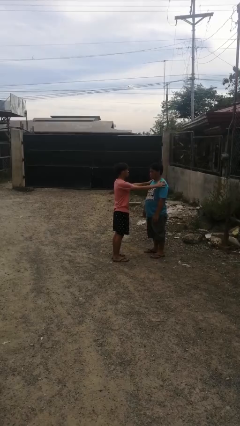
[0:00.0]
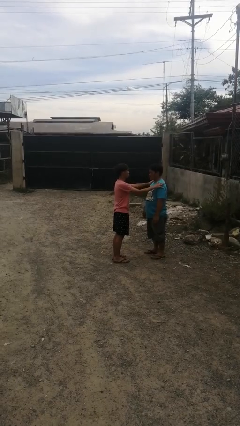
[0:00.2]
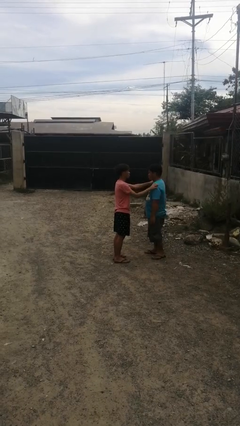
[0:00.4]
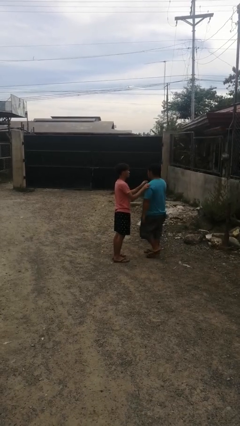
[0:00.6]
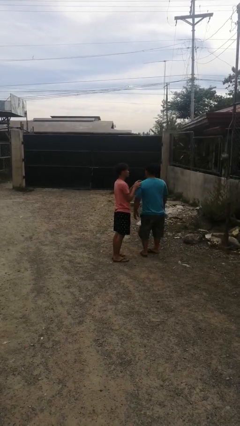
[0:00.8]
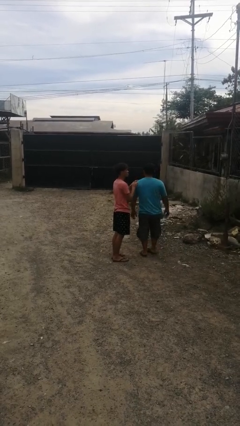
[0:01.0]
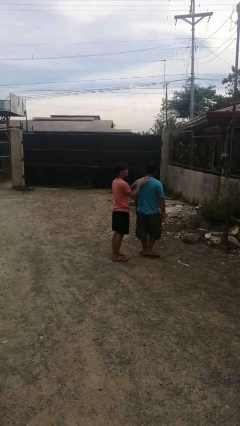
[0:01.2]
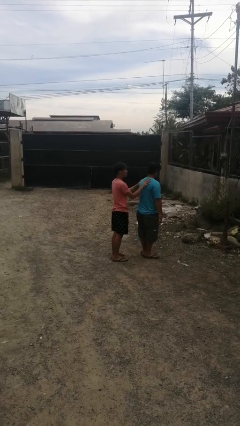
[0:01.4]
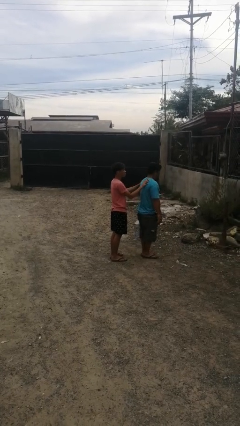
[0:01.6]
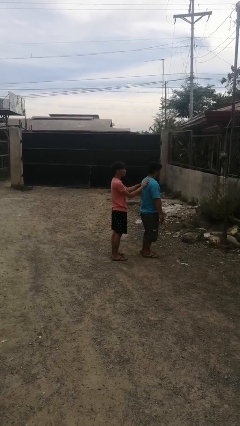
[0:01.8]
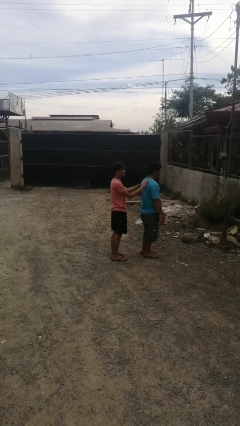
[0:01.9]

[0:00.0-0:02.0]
person spins person around

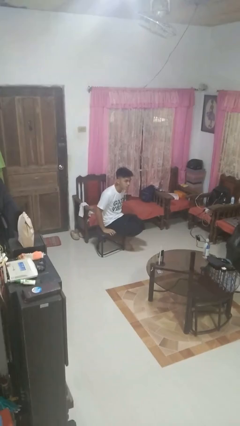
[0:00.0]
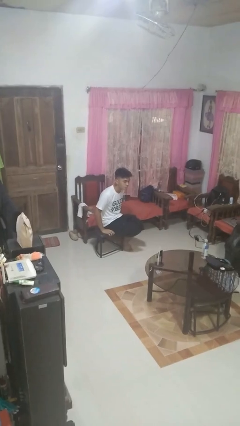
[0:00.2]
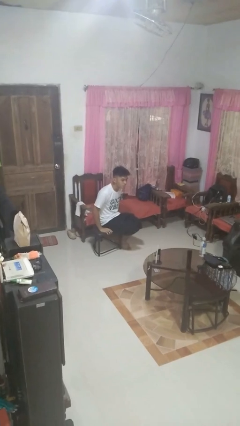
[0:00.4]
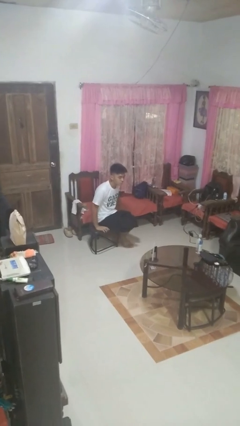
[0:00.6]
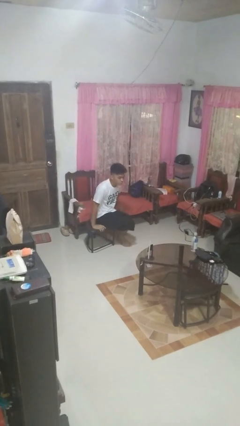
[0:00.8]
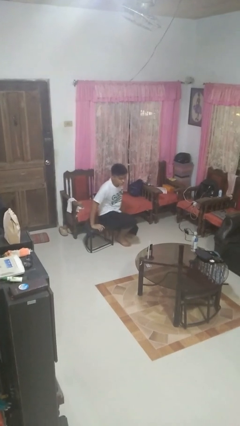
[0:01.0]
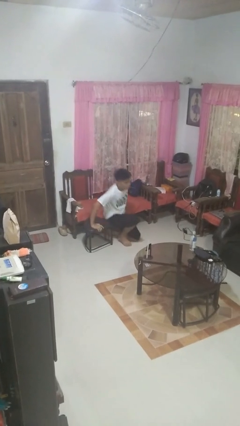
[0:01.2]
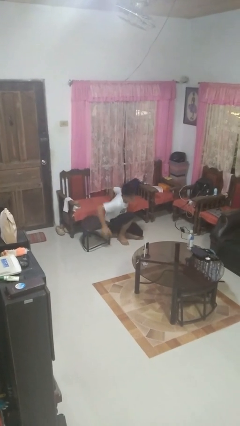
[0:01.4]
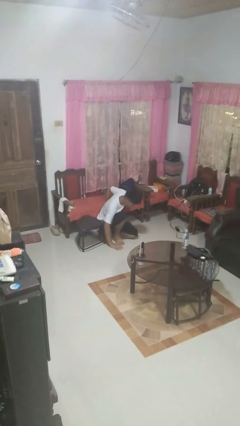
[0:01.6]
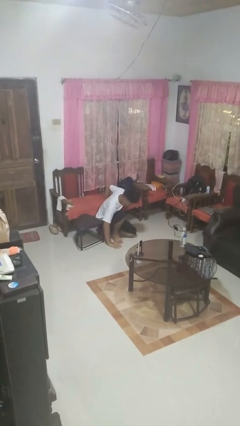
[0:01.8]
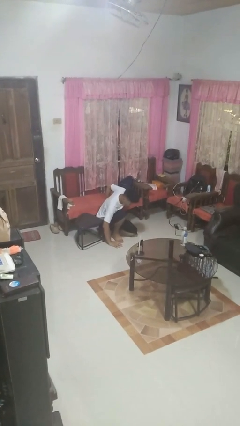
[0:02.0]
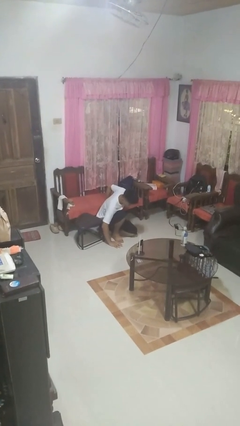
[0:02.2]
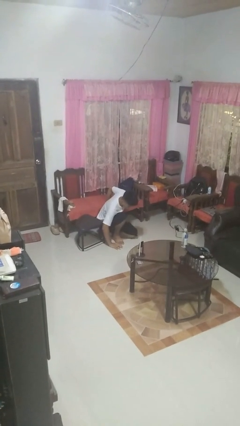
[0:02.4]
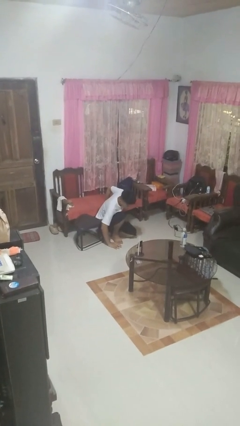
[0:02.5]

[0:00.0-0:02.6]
person falls from chair

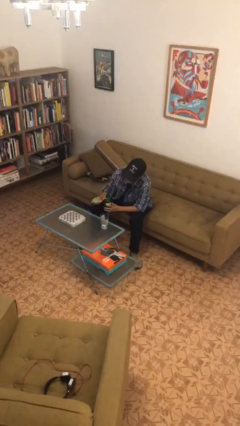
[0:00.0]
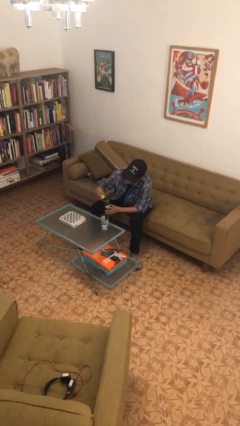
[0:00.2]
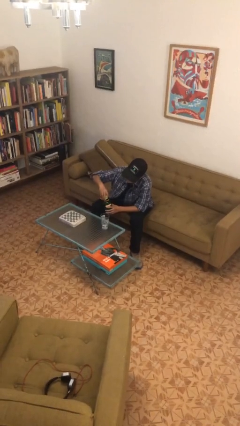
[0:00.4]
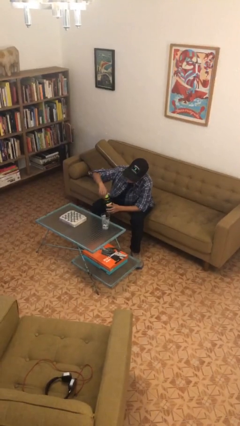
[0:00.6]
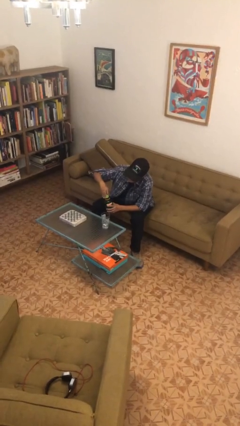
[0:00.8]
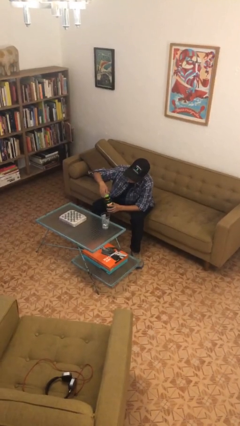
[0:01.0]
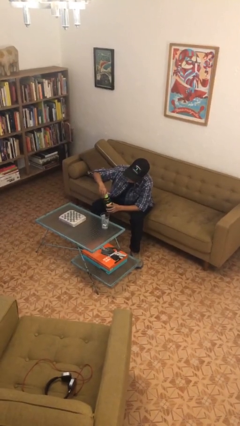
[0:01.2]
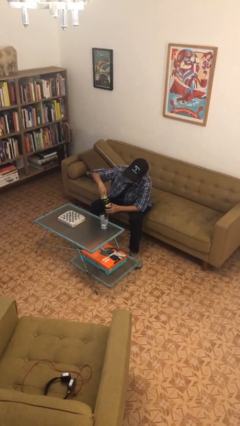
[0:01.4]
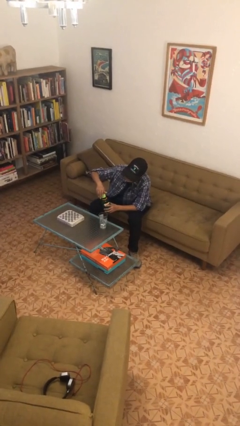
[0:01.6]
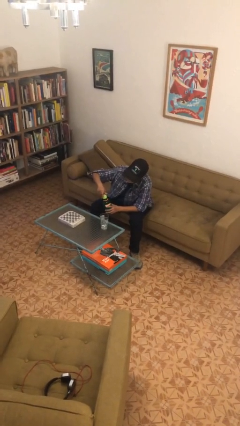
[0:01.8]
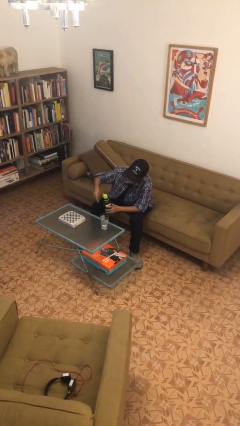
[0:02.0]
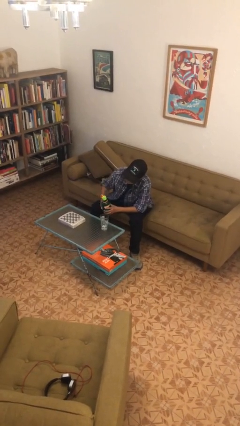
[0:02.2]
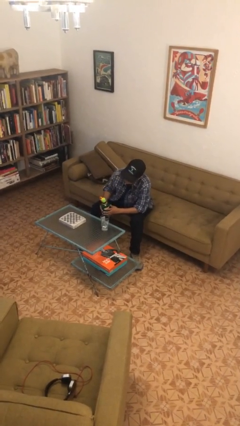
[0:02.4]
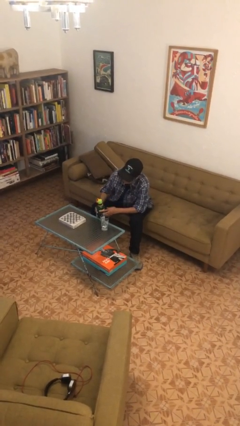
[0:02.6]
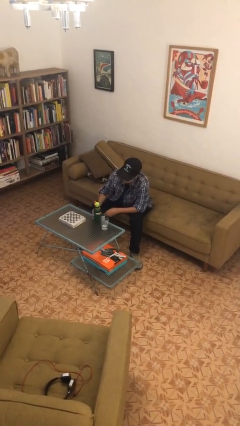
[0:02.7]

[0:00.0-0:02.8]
person screws lid to bottle

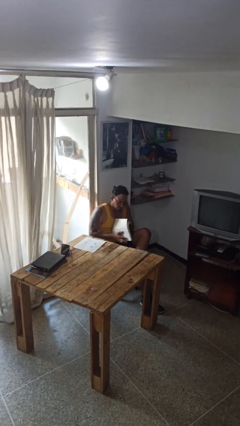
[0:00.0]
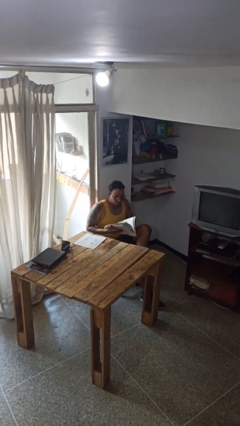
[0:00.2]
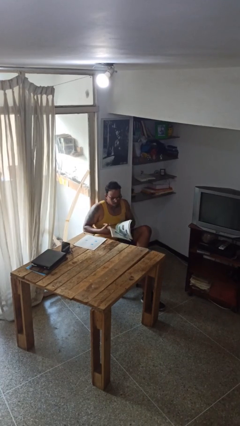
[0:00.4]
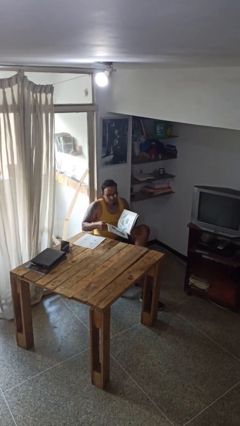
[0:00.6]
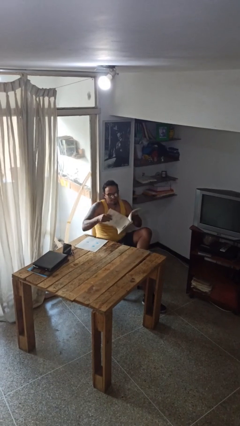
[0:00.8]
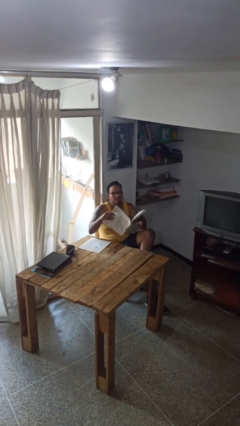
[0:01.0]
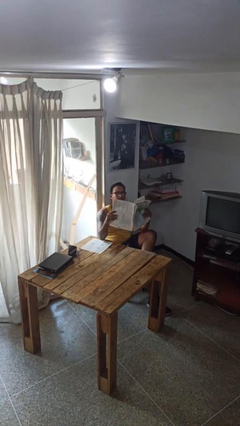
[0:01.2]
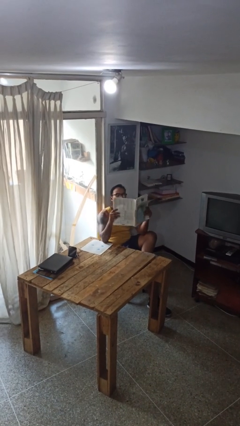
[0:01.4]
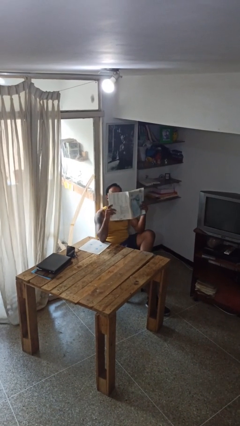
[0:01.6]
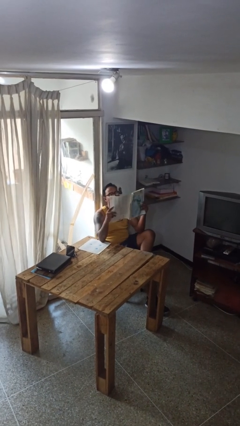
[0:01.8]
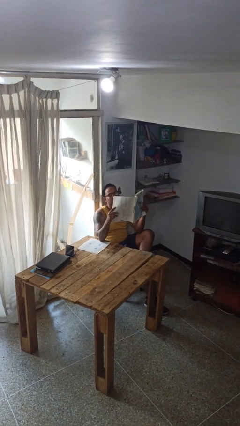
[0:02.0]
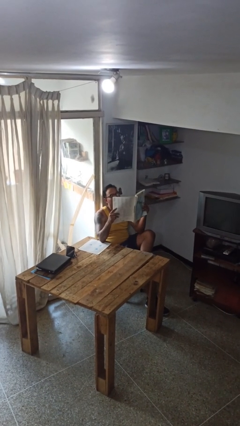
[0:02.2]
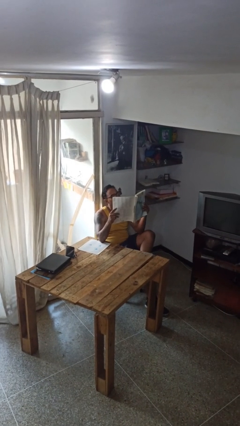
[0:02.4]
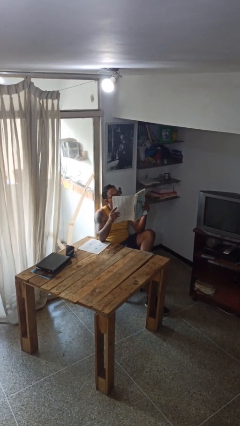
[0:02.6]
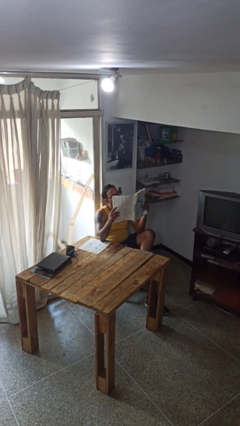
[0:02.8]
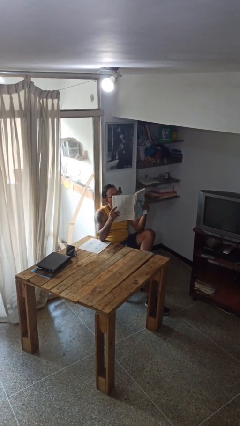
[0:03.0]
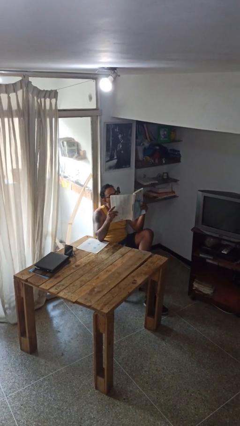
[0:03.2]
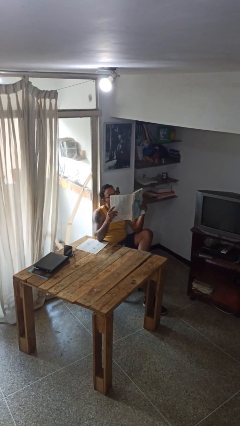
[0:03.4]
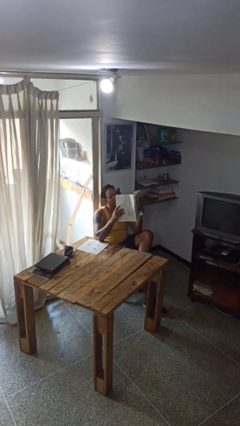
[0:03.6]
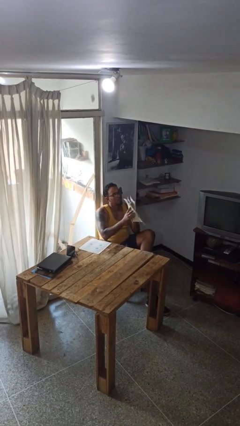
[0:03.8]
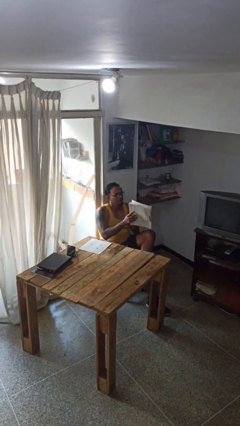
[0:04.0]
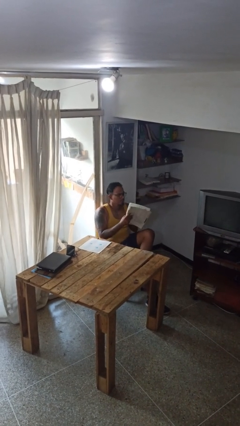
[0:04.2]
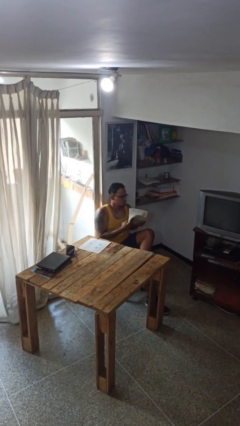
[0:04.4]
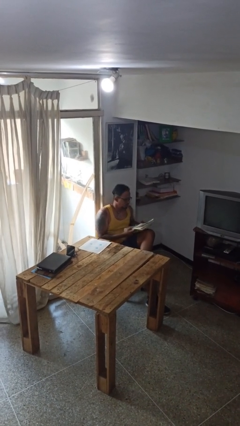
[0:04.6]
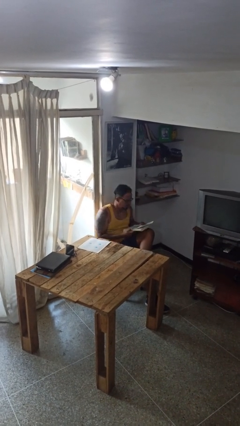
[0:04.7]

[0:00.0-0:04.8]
person reads document

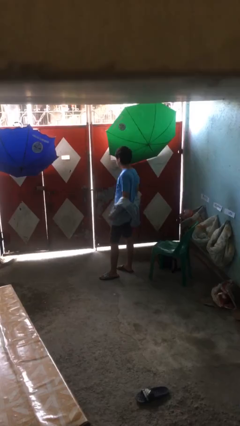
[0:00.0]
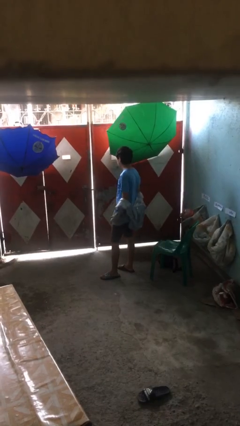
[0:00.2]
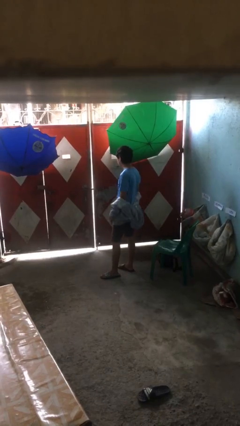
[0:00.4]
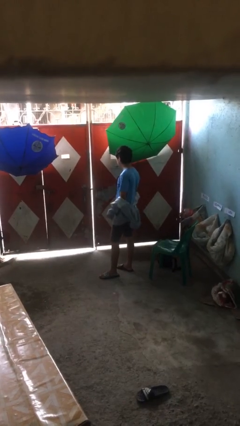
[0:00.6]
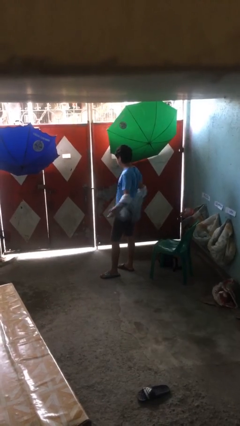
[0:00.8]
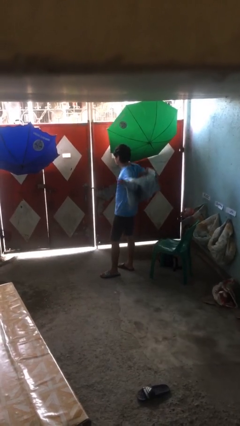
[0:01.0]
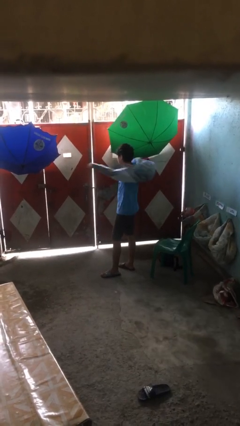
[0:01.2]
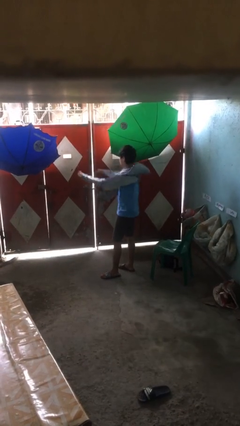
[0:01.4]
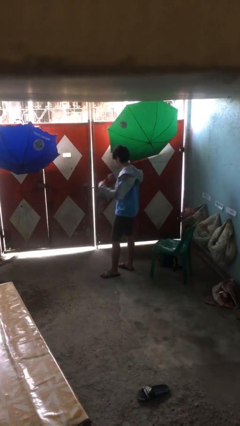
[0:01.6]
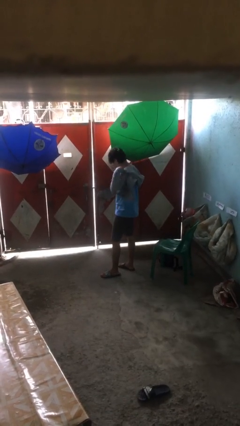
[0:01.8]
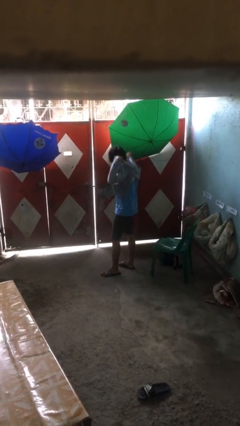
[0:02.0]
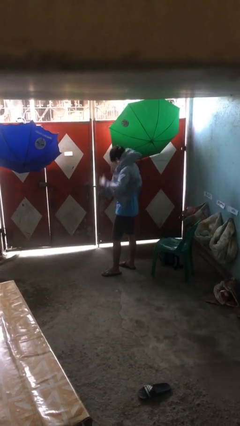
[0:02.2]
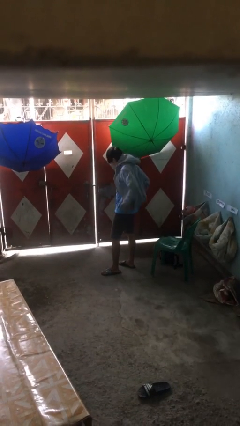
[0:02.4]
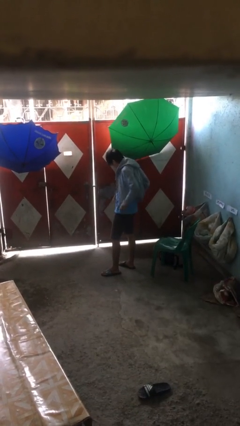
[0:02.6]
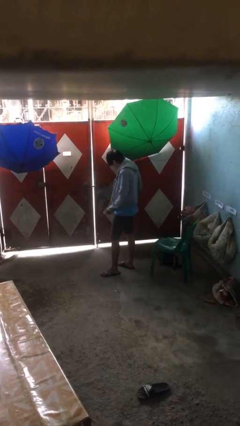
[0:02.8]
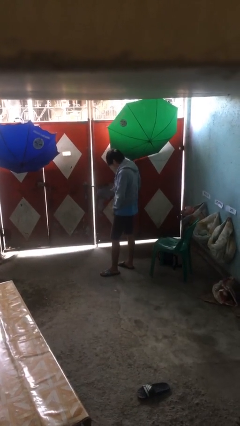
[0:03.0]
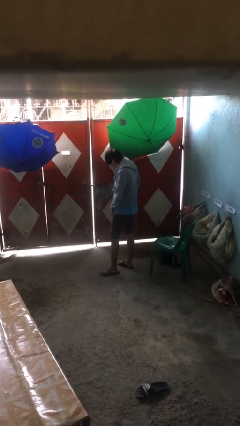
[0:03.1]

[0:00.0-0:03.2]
person puts on jacket

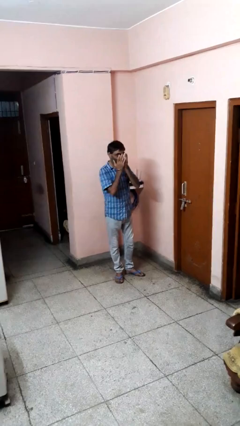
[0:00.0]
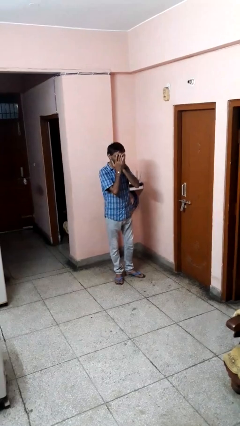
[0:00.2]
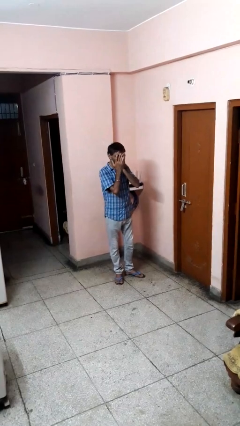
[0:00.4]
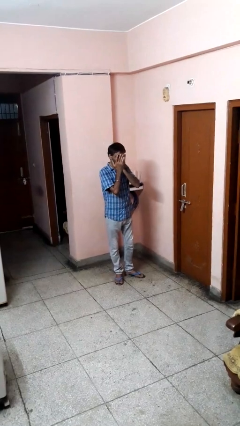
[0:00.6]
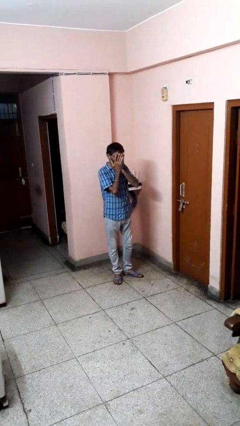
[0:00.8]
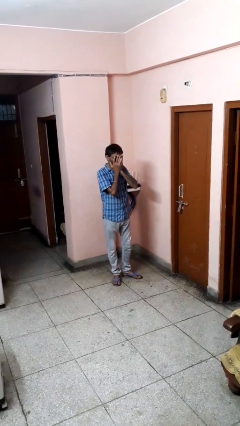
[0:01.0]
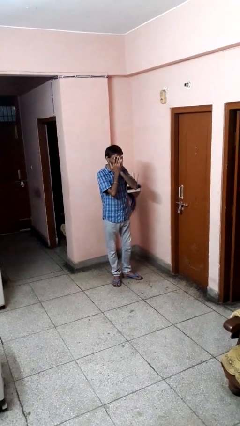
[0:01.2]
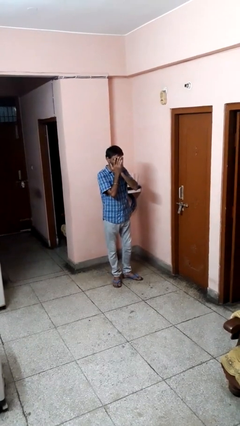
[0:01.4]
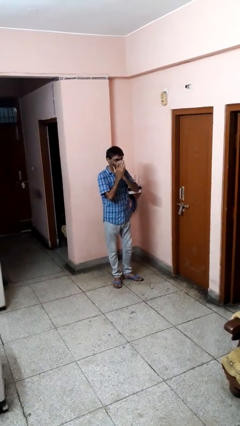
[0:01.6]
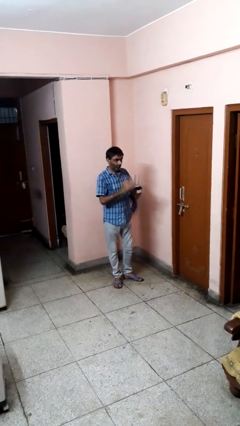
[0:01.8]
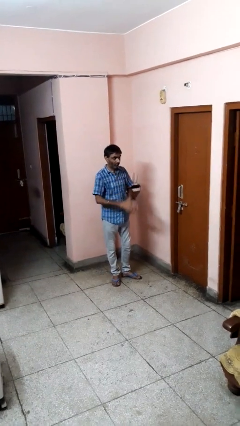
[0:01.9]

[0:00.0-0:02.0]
person covers face with hands

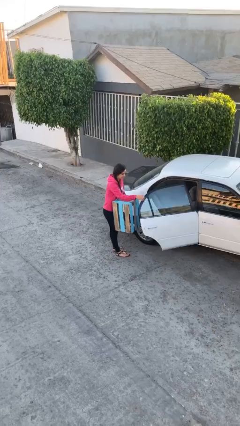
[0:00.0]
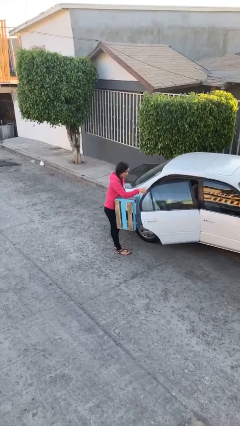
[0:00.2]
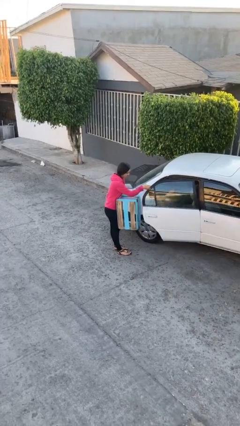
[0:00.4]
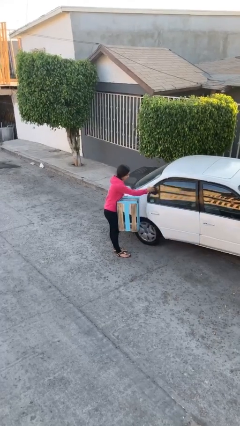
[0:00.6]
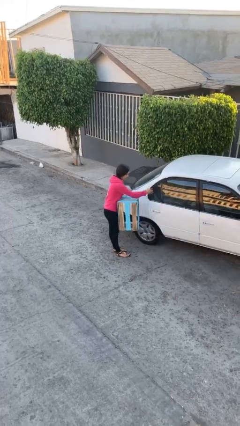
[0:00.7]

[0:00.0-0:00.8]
person closes car door
